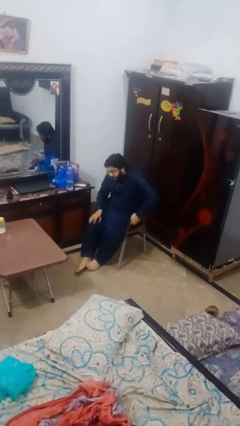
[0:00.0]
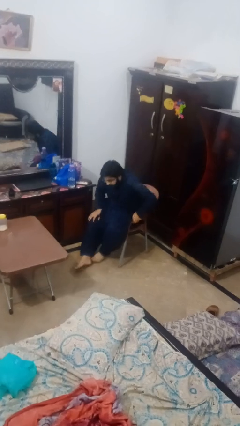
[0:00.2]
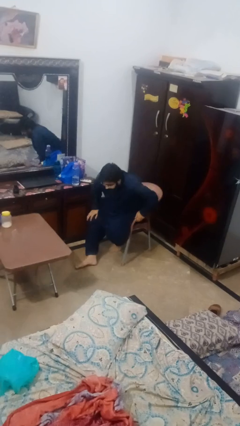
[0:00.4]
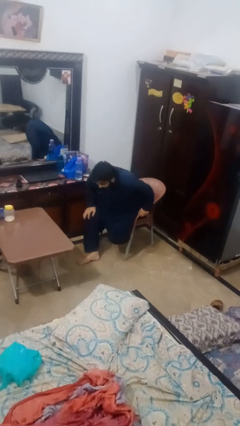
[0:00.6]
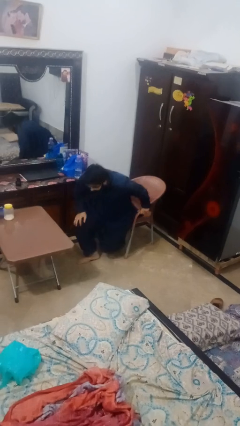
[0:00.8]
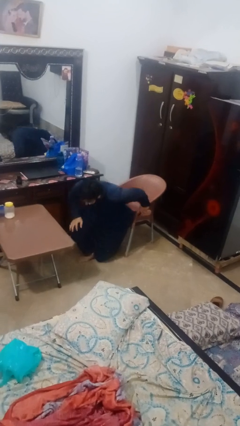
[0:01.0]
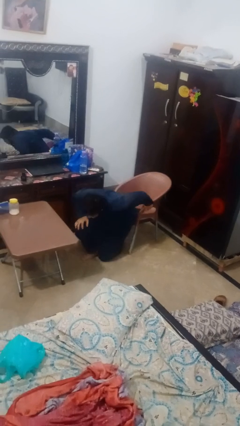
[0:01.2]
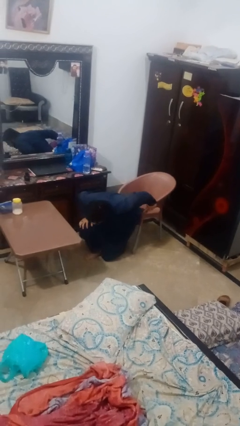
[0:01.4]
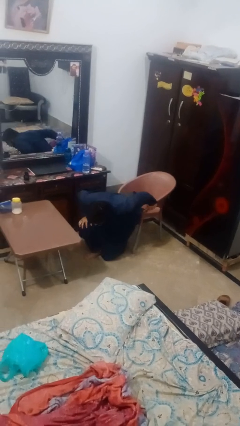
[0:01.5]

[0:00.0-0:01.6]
person falls from chair

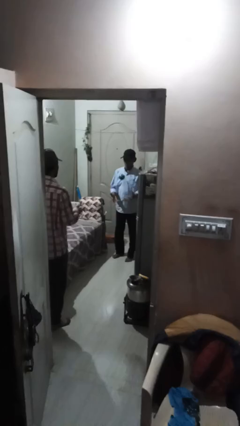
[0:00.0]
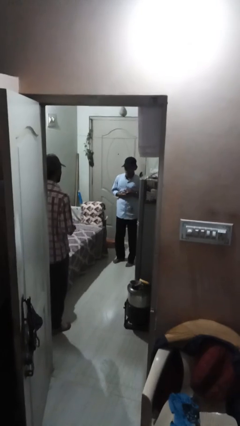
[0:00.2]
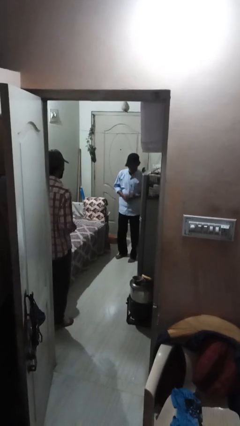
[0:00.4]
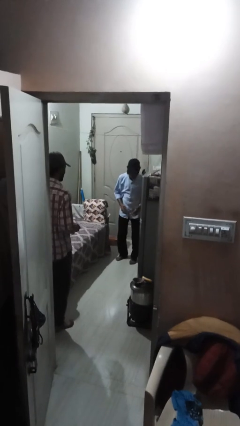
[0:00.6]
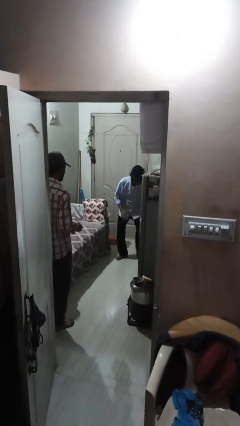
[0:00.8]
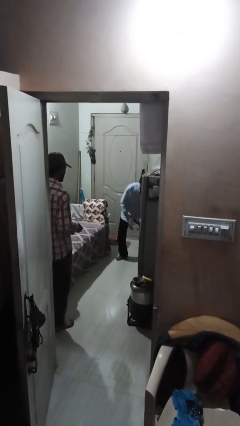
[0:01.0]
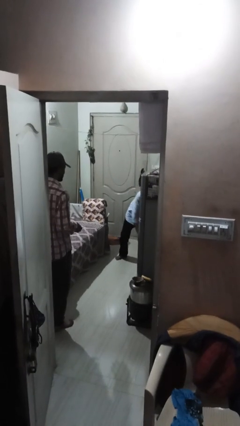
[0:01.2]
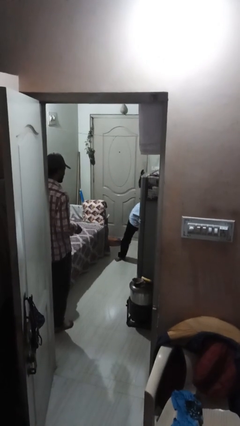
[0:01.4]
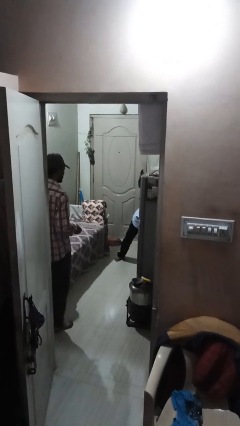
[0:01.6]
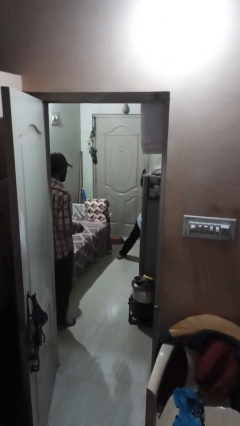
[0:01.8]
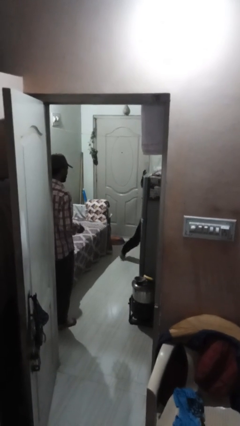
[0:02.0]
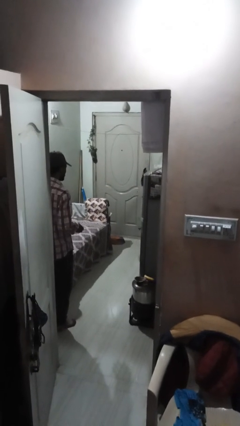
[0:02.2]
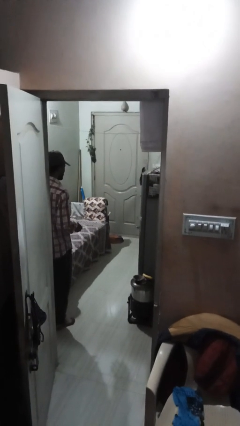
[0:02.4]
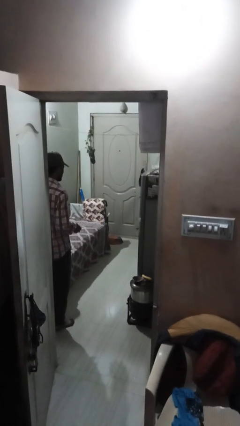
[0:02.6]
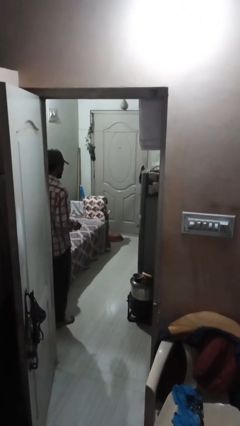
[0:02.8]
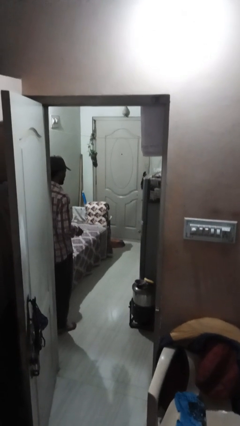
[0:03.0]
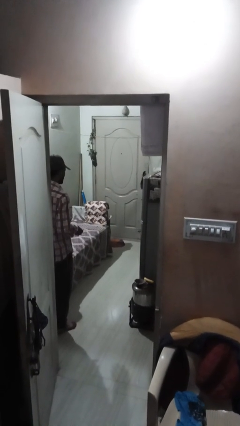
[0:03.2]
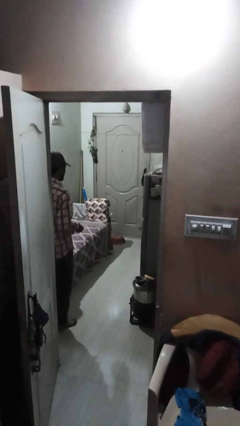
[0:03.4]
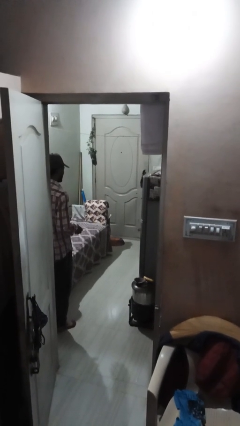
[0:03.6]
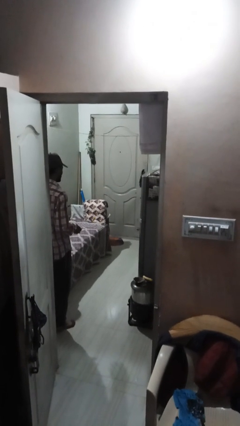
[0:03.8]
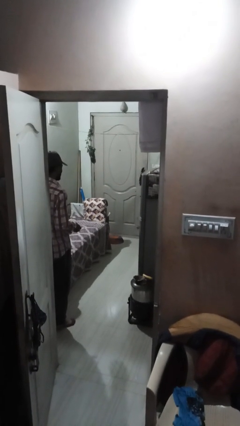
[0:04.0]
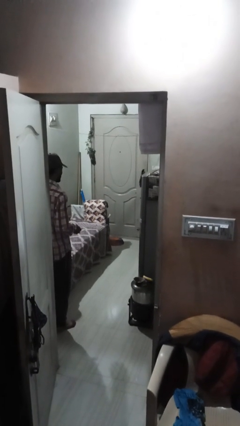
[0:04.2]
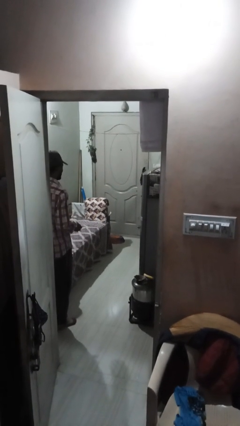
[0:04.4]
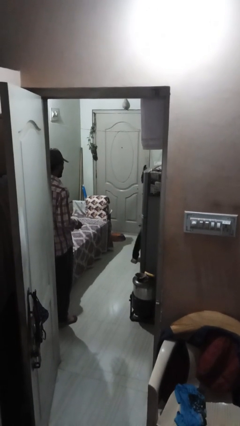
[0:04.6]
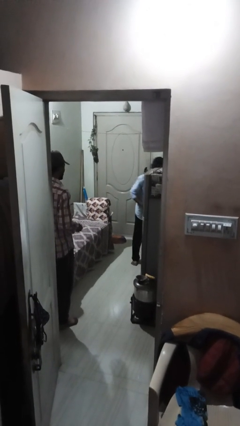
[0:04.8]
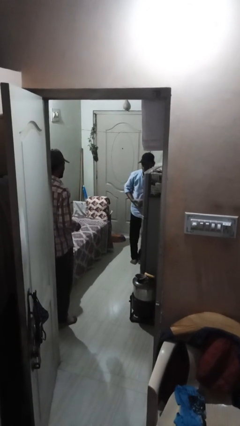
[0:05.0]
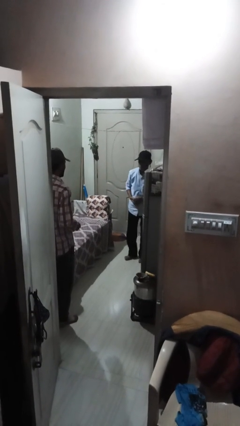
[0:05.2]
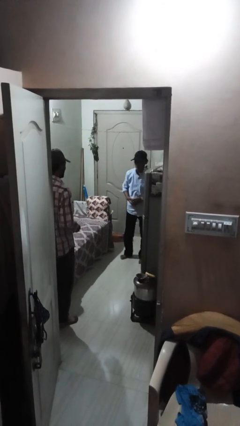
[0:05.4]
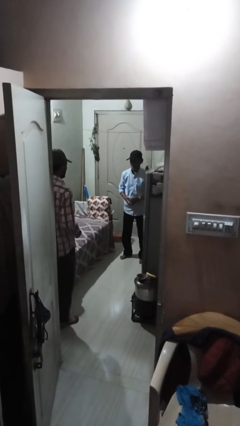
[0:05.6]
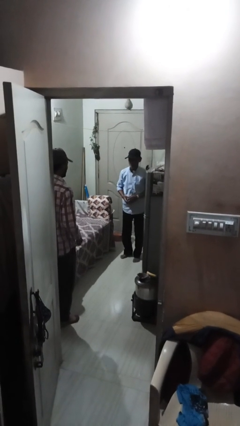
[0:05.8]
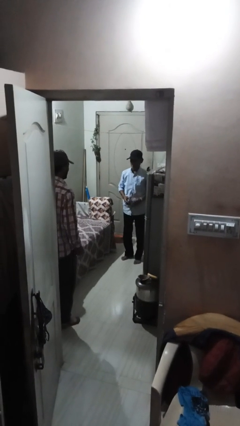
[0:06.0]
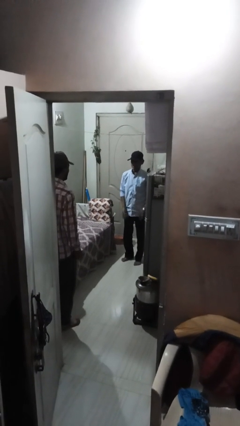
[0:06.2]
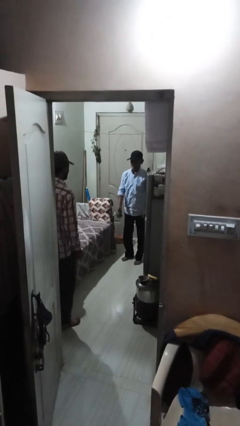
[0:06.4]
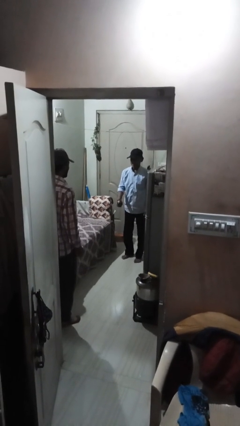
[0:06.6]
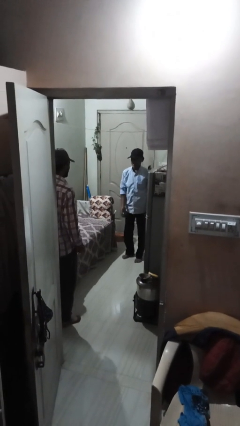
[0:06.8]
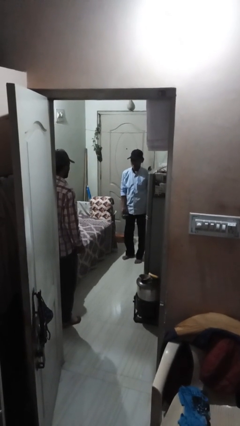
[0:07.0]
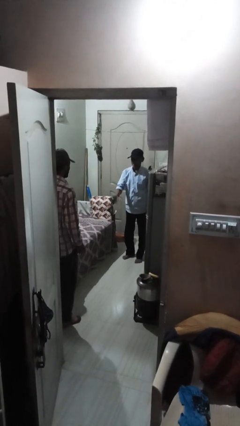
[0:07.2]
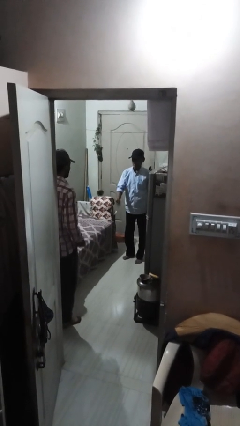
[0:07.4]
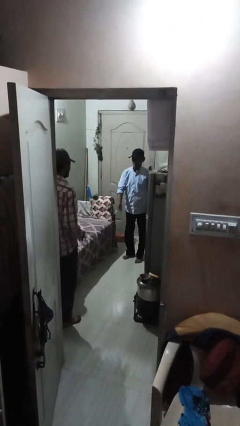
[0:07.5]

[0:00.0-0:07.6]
person catches object from person

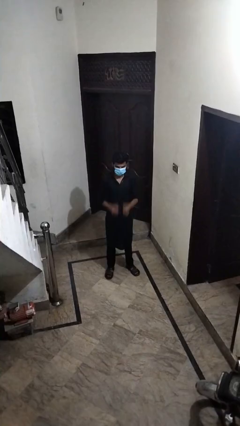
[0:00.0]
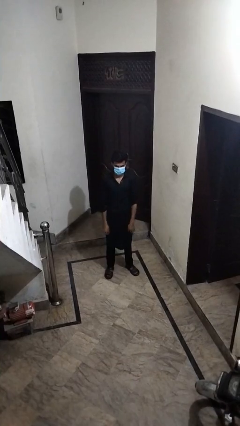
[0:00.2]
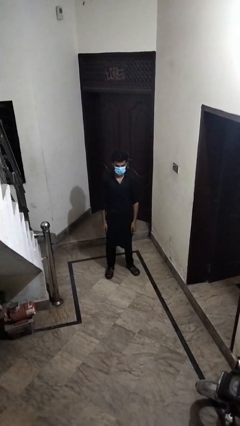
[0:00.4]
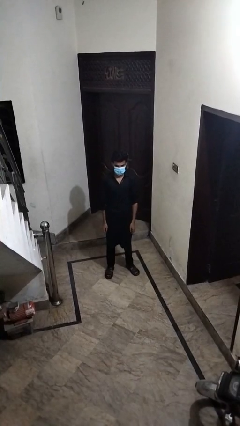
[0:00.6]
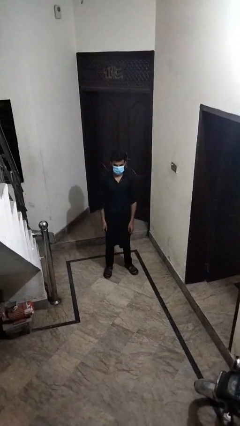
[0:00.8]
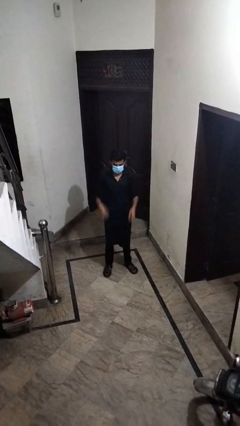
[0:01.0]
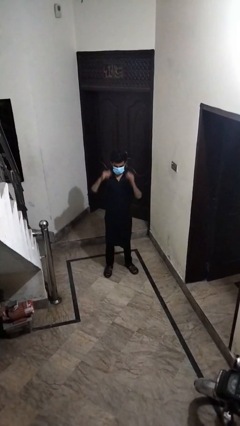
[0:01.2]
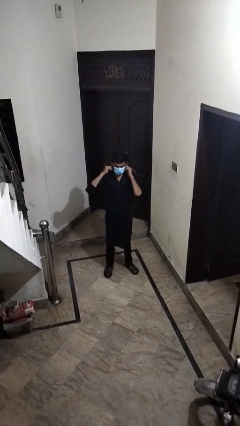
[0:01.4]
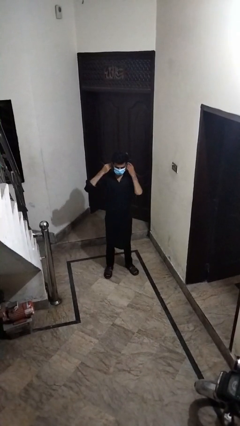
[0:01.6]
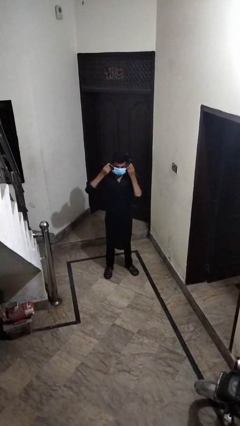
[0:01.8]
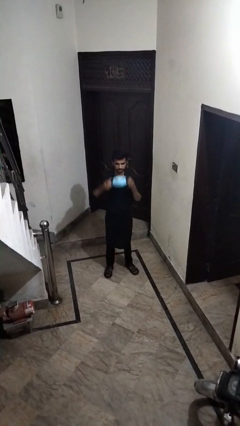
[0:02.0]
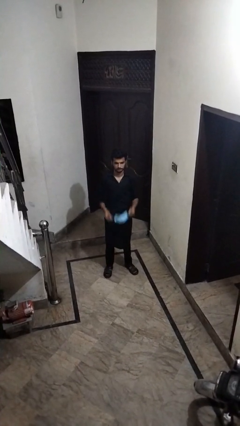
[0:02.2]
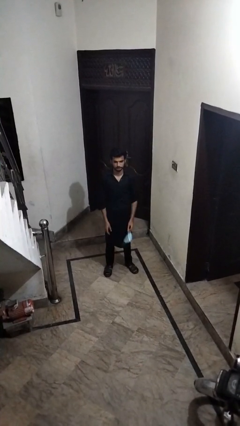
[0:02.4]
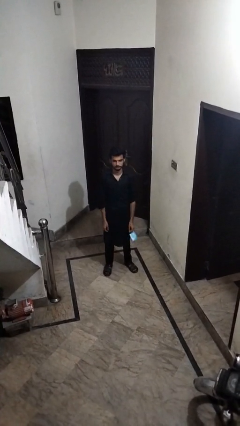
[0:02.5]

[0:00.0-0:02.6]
person takes off facemask

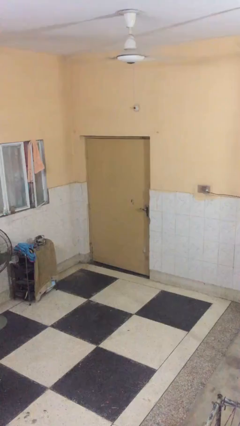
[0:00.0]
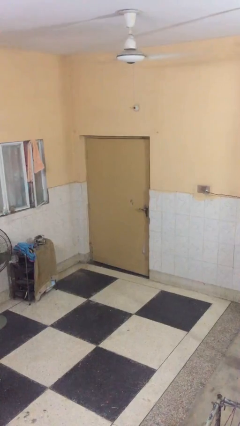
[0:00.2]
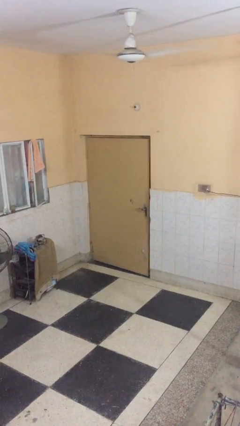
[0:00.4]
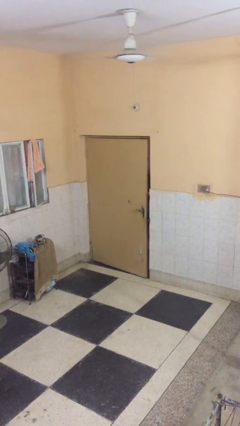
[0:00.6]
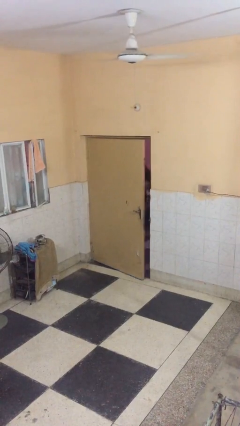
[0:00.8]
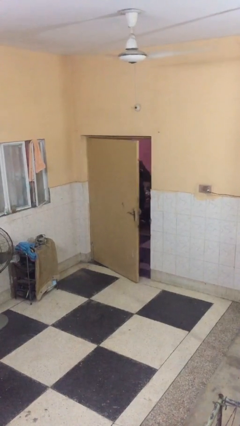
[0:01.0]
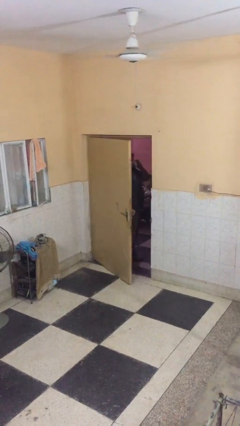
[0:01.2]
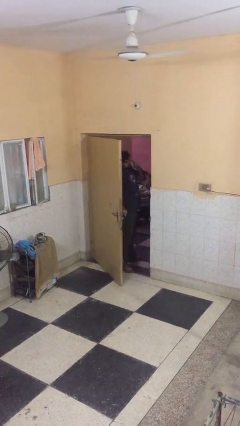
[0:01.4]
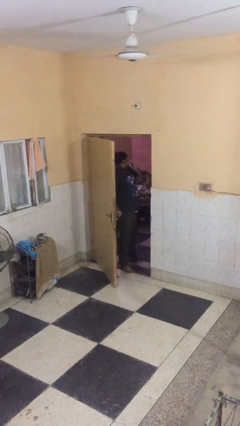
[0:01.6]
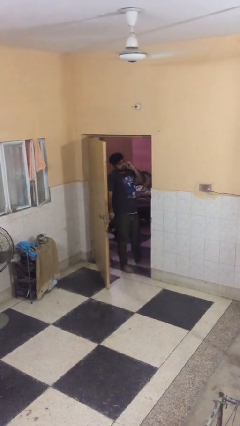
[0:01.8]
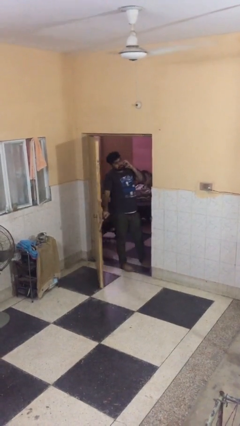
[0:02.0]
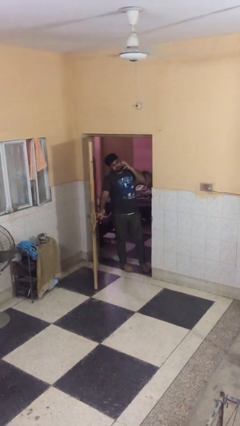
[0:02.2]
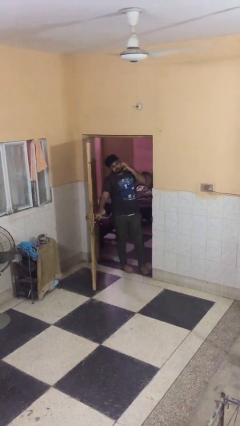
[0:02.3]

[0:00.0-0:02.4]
person opens facility door

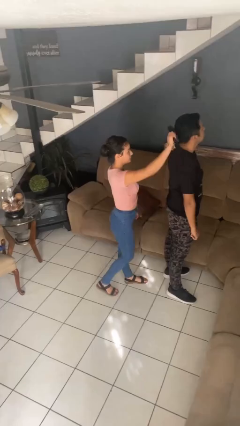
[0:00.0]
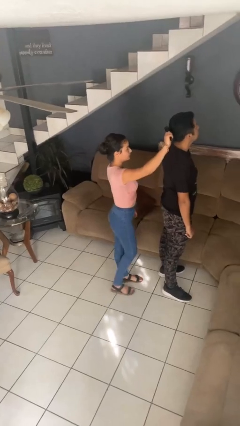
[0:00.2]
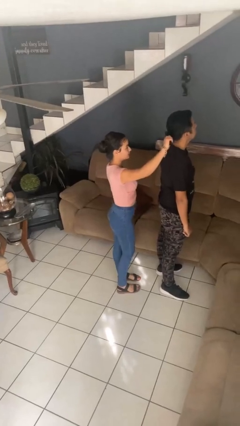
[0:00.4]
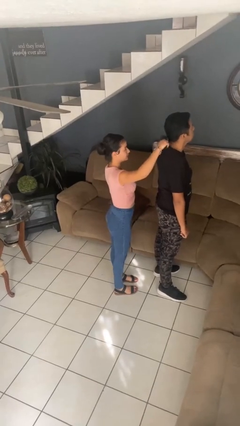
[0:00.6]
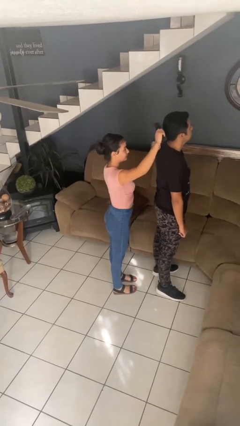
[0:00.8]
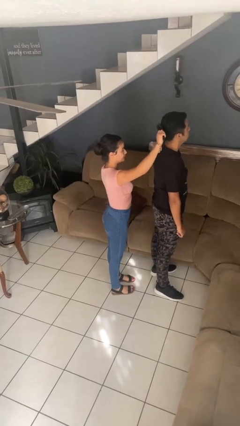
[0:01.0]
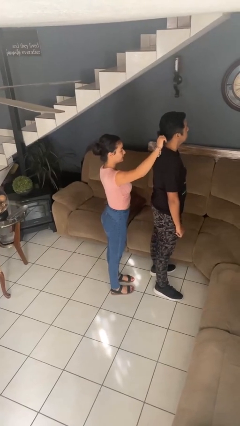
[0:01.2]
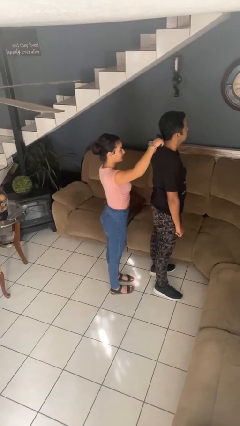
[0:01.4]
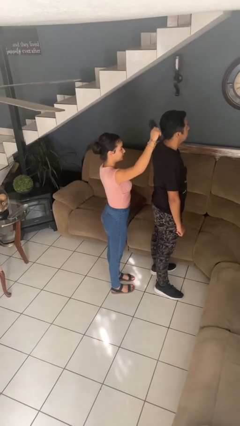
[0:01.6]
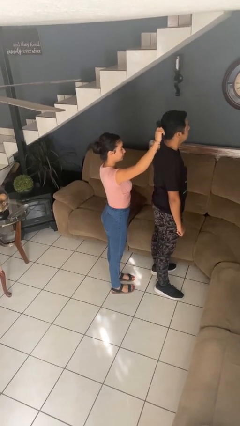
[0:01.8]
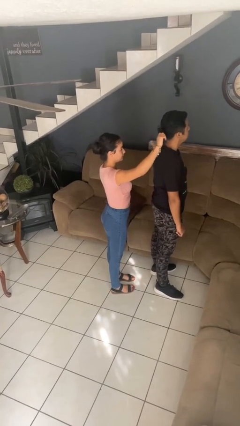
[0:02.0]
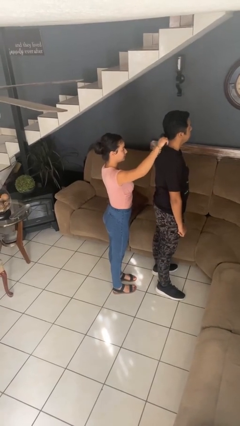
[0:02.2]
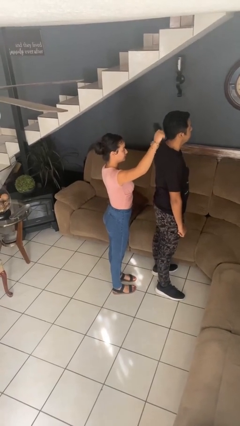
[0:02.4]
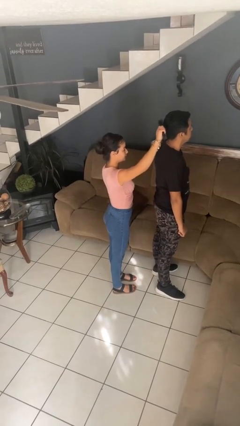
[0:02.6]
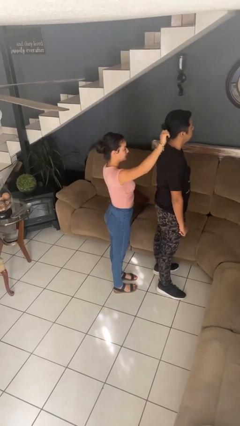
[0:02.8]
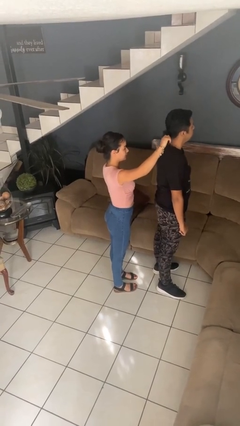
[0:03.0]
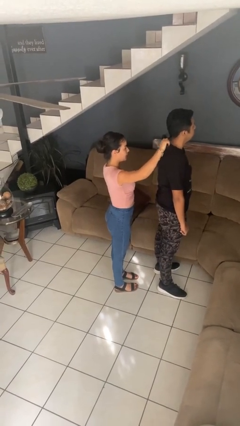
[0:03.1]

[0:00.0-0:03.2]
person brushes hair of person
